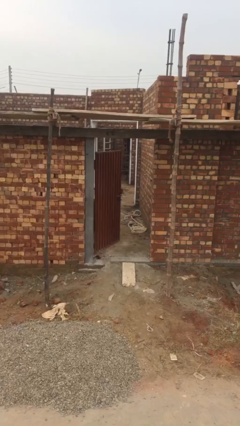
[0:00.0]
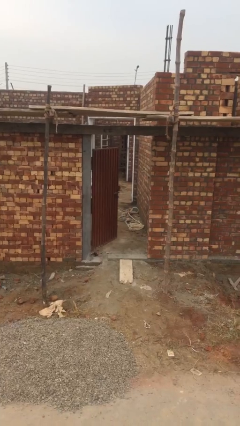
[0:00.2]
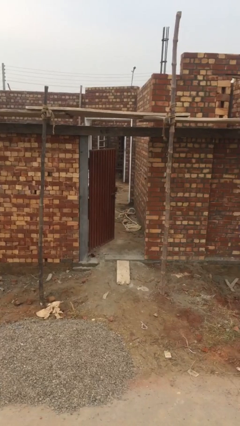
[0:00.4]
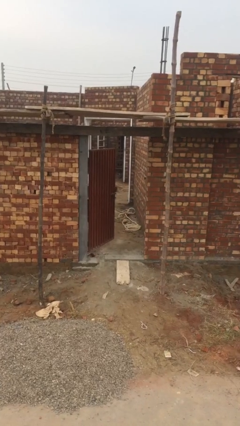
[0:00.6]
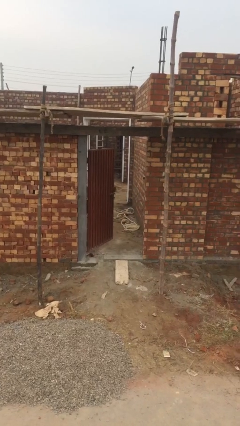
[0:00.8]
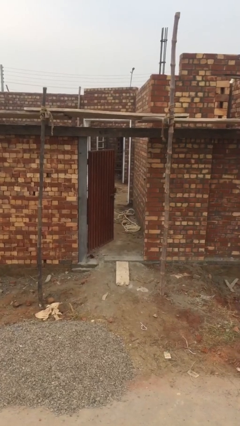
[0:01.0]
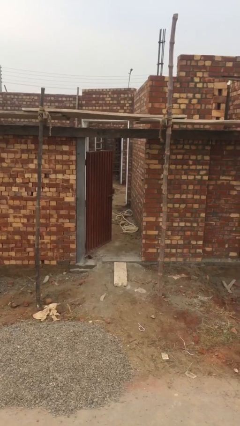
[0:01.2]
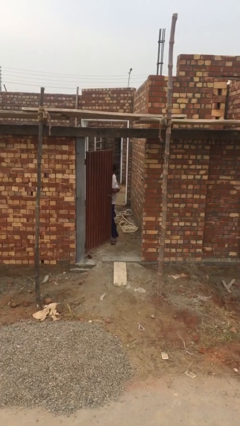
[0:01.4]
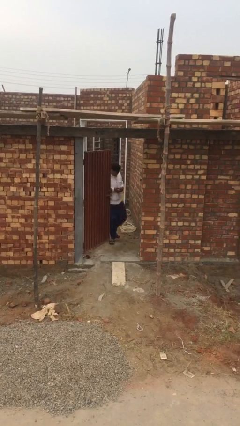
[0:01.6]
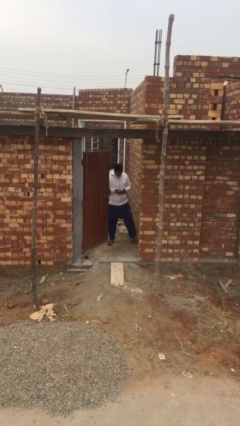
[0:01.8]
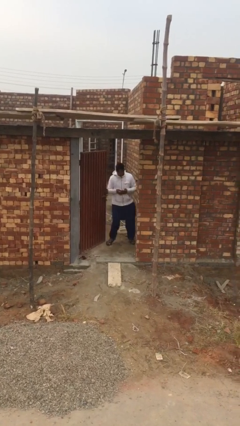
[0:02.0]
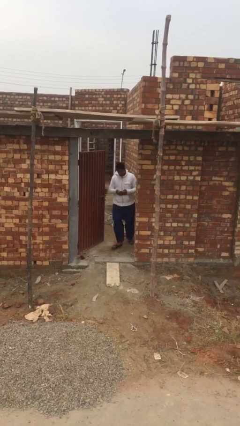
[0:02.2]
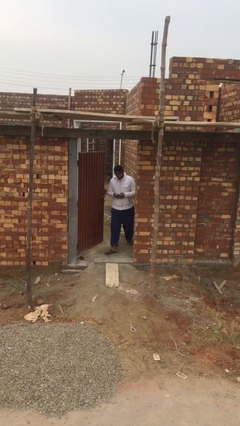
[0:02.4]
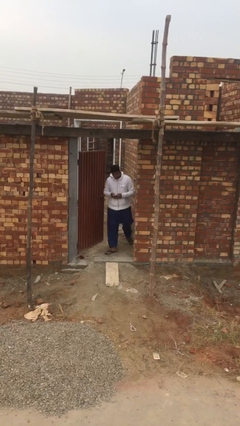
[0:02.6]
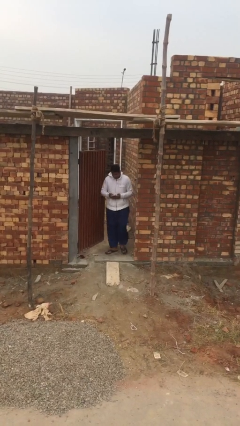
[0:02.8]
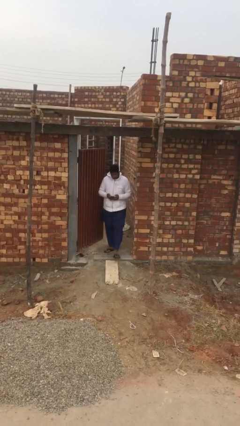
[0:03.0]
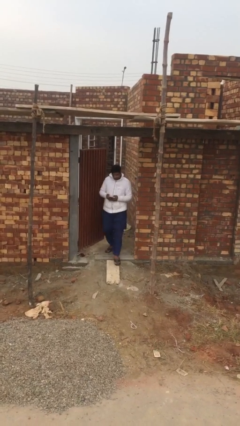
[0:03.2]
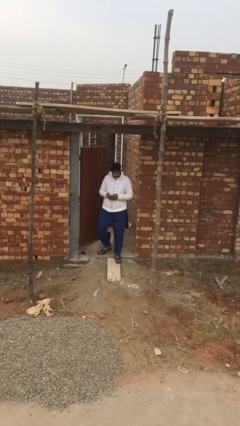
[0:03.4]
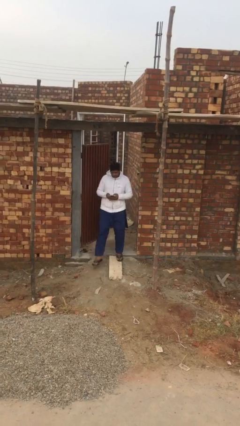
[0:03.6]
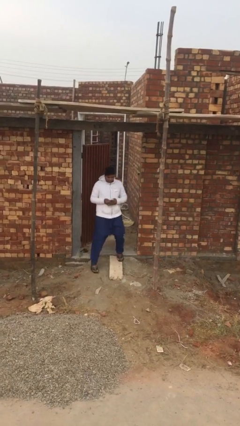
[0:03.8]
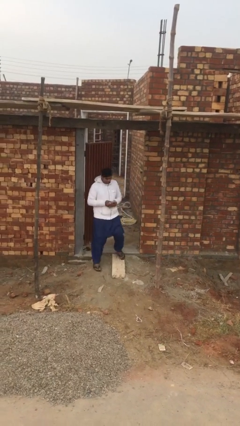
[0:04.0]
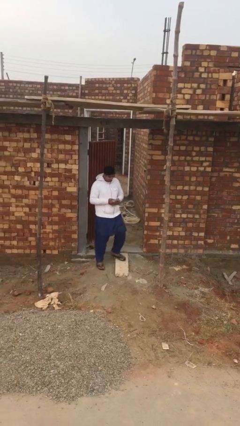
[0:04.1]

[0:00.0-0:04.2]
person enters scene through structure

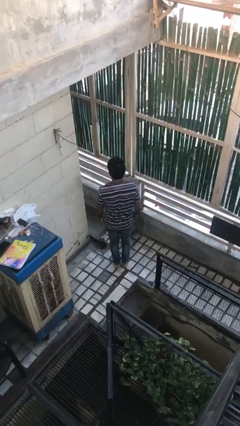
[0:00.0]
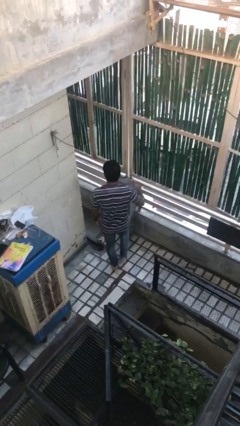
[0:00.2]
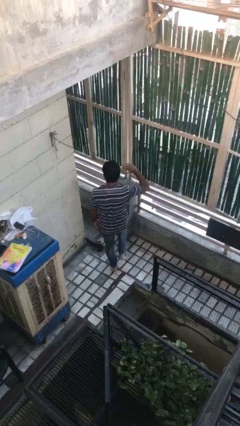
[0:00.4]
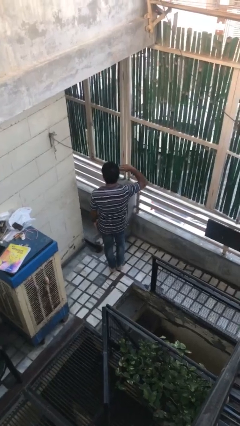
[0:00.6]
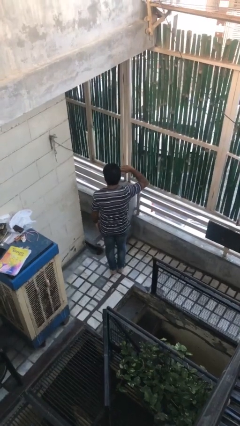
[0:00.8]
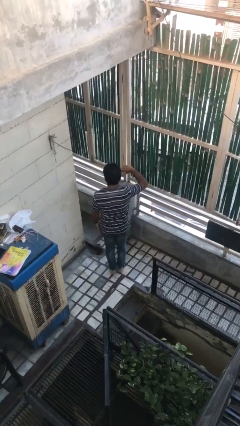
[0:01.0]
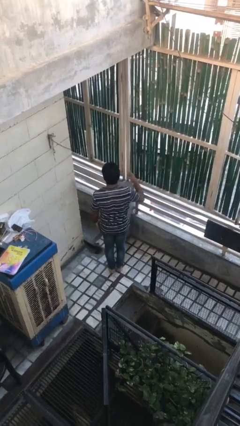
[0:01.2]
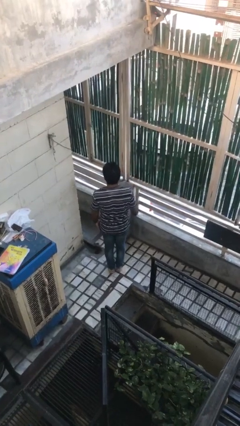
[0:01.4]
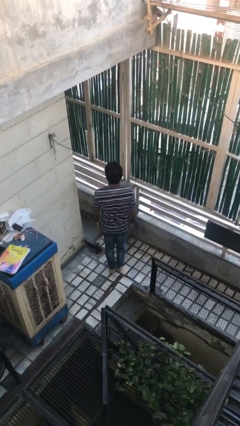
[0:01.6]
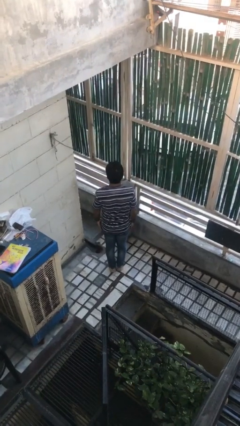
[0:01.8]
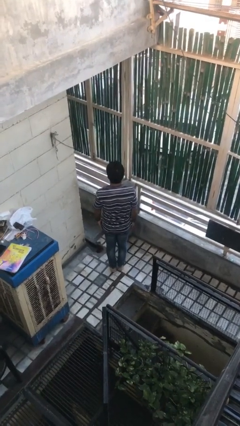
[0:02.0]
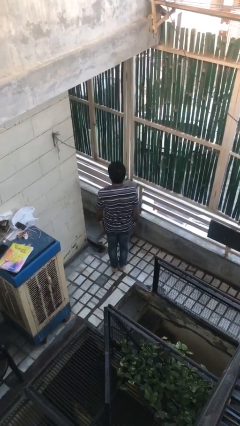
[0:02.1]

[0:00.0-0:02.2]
person salutes

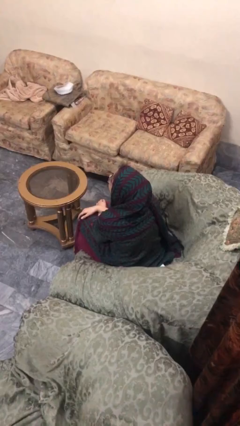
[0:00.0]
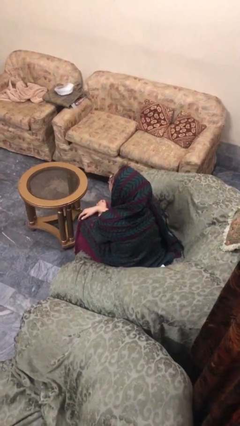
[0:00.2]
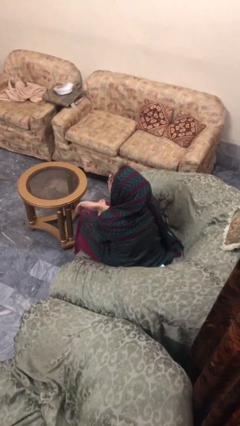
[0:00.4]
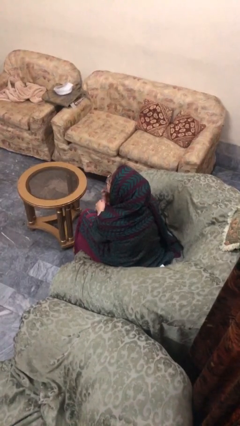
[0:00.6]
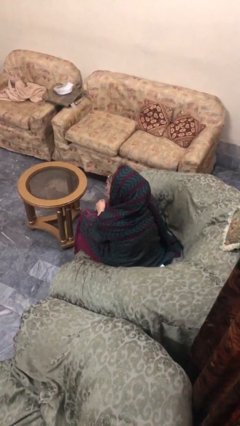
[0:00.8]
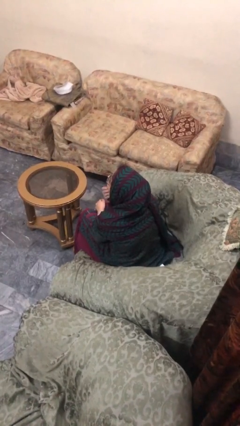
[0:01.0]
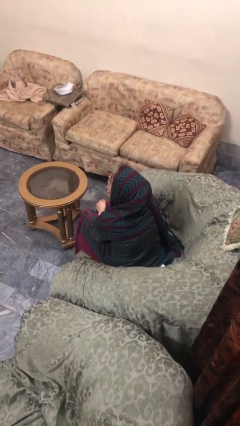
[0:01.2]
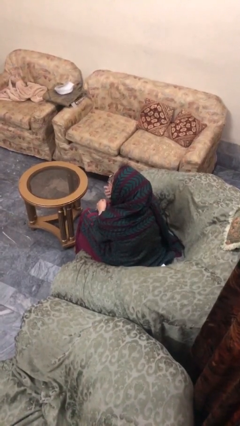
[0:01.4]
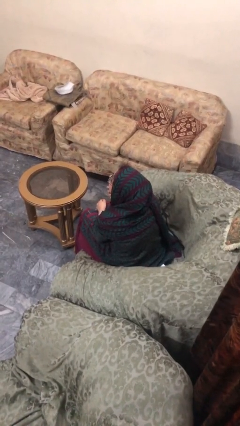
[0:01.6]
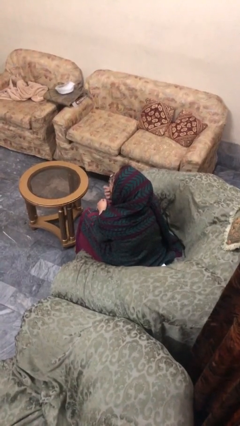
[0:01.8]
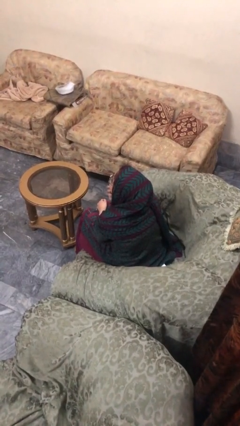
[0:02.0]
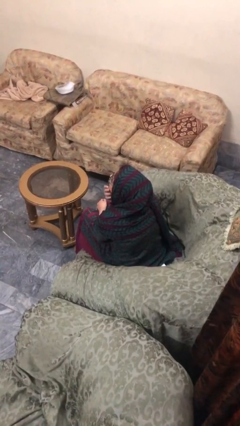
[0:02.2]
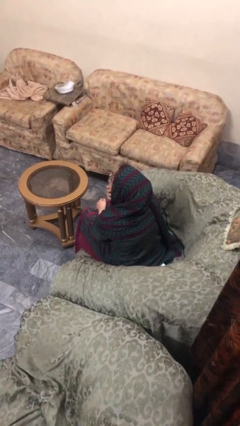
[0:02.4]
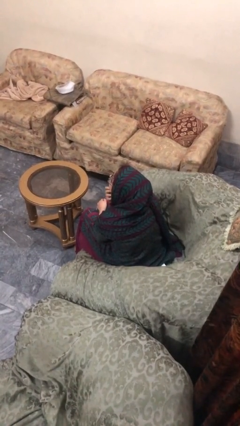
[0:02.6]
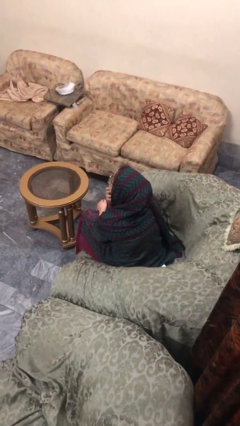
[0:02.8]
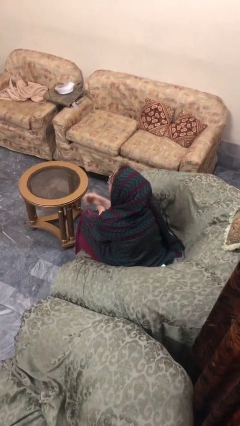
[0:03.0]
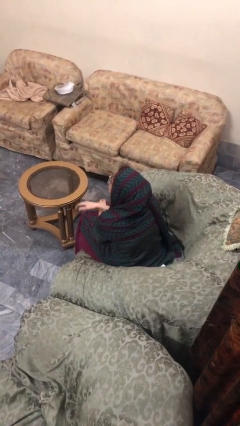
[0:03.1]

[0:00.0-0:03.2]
person strokes chin

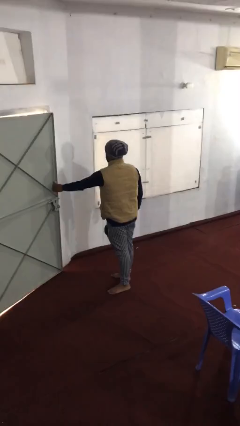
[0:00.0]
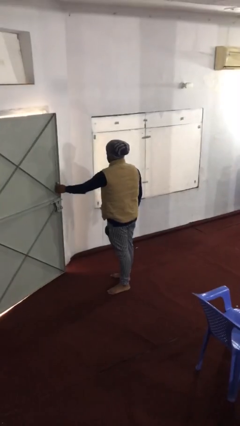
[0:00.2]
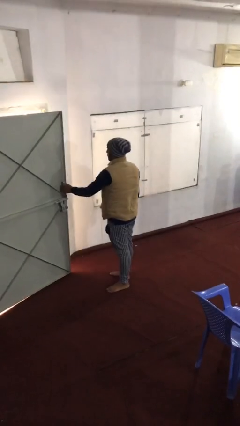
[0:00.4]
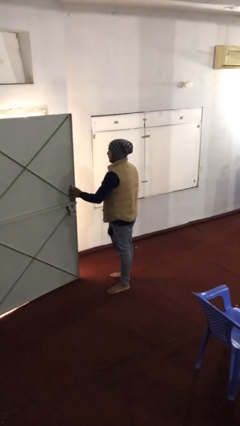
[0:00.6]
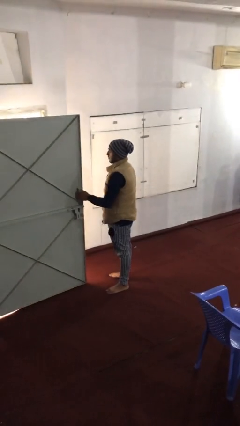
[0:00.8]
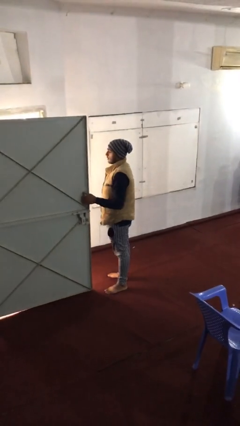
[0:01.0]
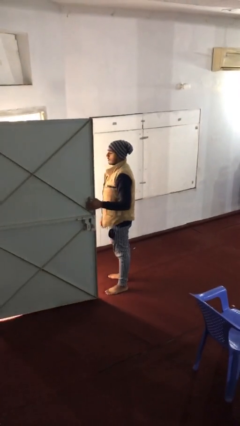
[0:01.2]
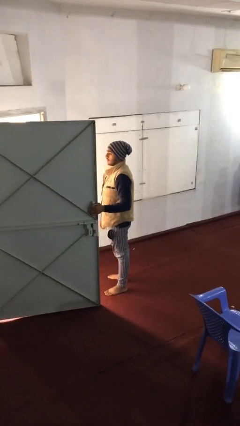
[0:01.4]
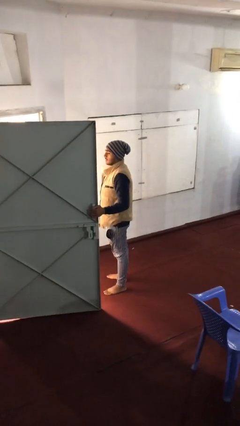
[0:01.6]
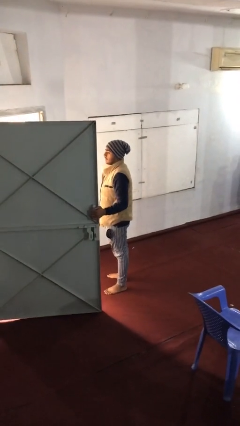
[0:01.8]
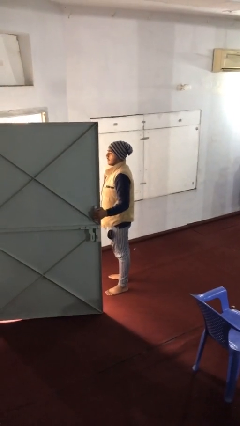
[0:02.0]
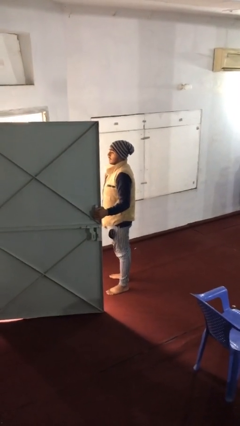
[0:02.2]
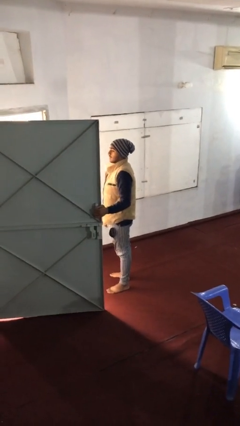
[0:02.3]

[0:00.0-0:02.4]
person opens facility door

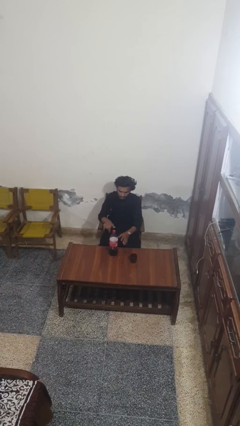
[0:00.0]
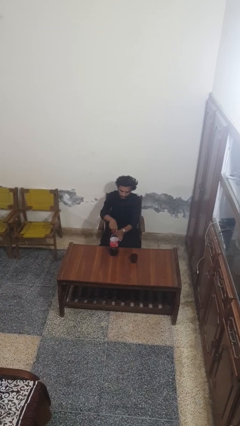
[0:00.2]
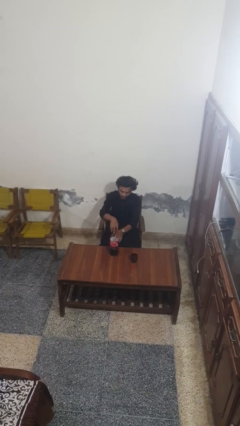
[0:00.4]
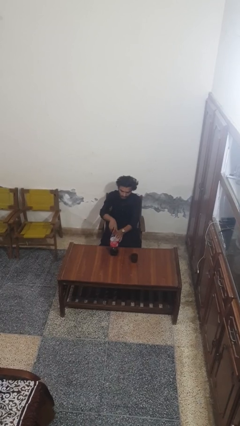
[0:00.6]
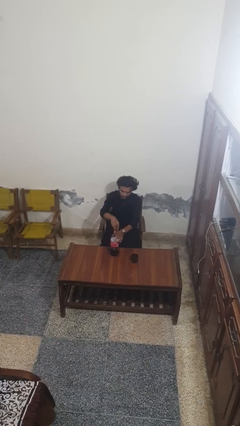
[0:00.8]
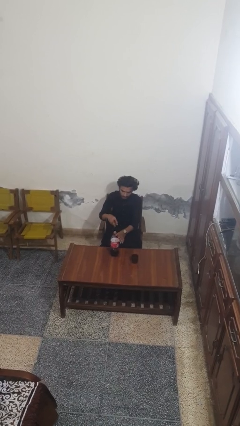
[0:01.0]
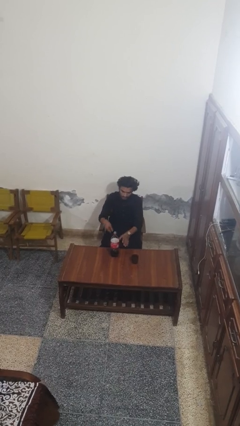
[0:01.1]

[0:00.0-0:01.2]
person unscrews lid from bottle

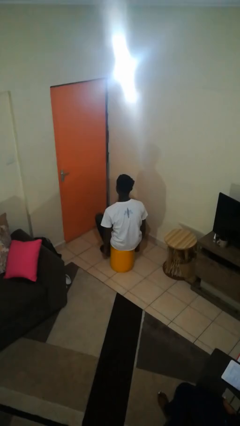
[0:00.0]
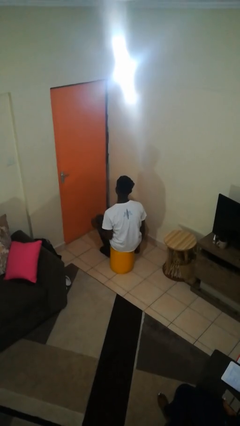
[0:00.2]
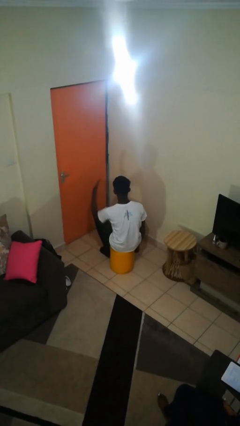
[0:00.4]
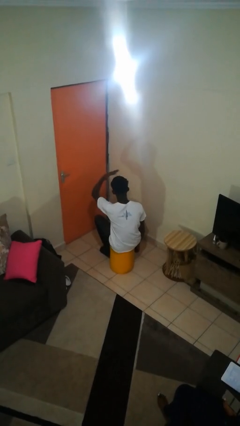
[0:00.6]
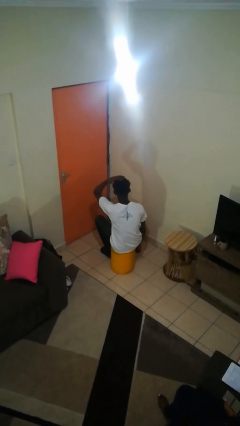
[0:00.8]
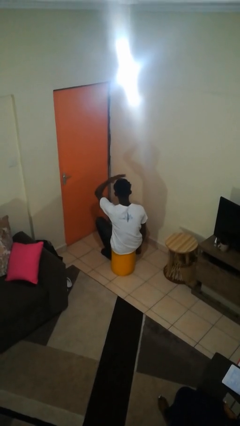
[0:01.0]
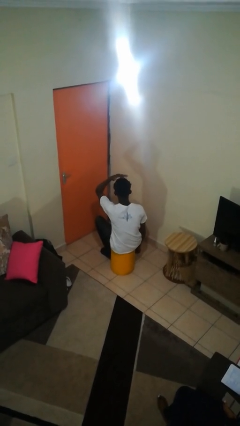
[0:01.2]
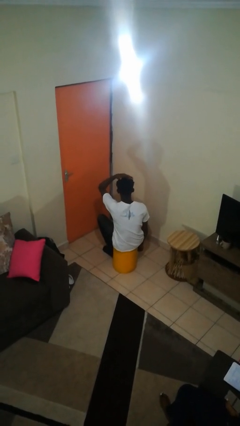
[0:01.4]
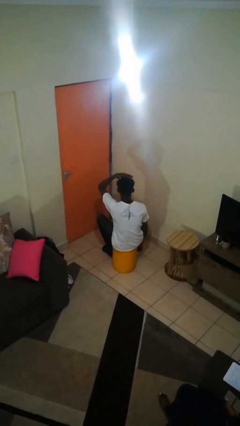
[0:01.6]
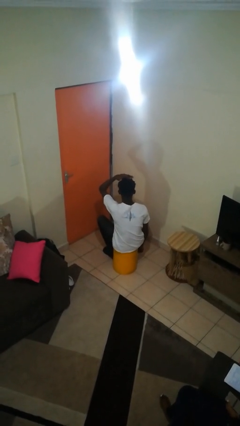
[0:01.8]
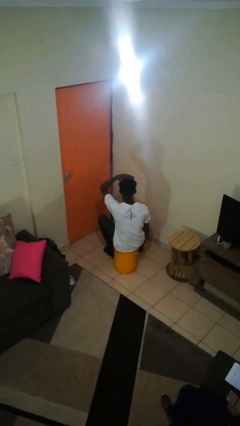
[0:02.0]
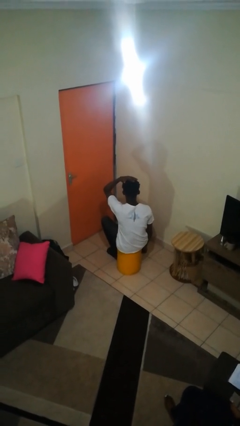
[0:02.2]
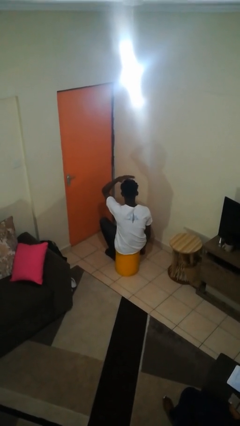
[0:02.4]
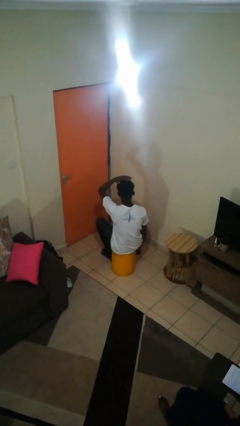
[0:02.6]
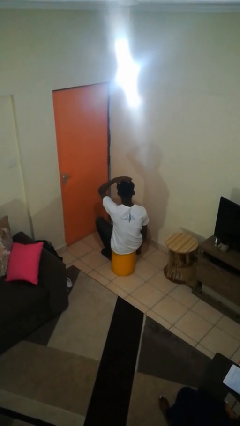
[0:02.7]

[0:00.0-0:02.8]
person pats head

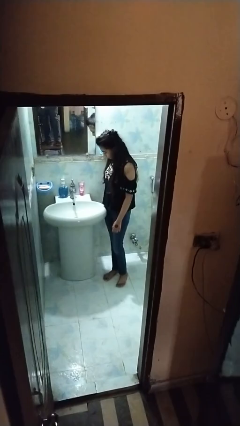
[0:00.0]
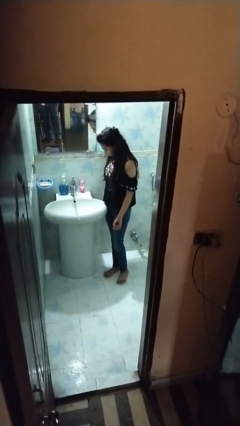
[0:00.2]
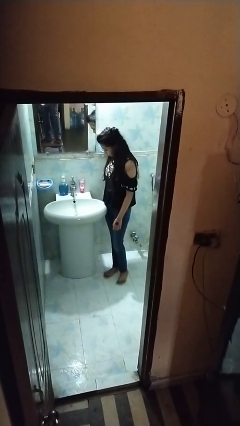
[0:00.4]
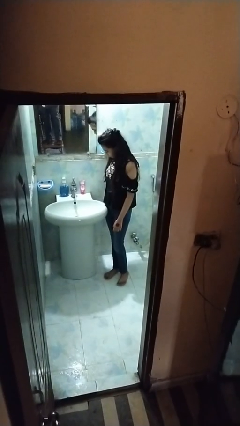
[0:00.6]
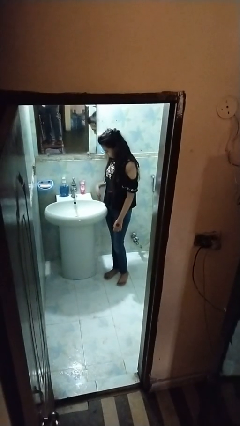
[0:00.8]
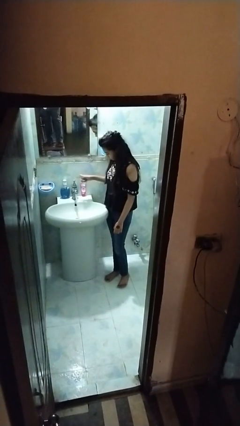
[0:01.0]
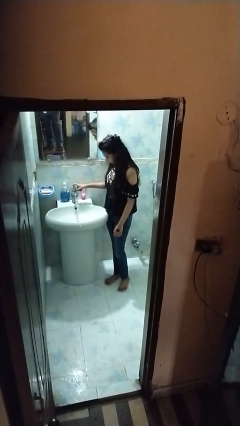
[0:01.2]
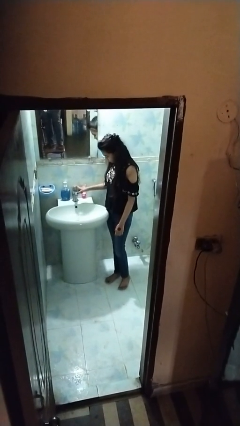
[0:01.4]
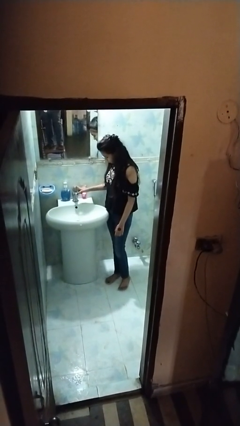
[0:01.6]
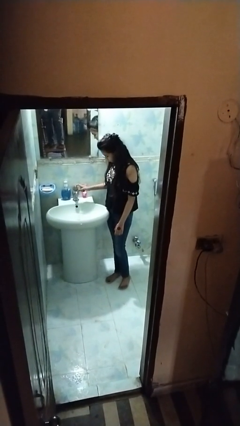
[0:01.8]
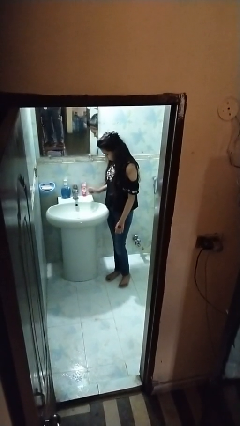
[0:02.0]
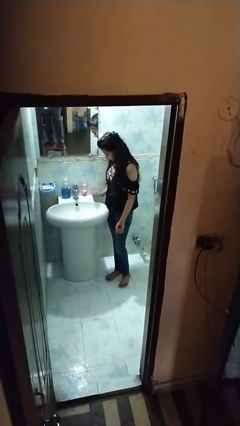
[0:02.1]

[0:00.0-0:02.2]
person turns off faucet
